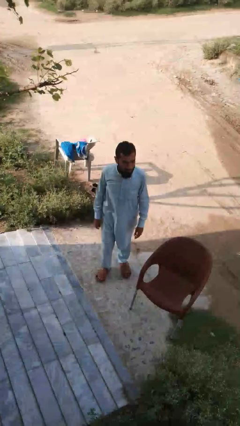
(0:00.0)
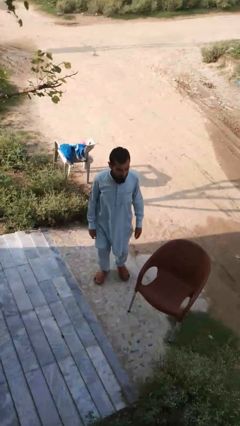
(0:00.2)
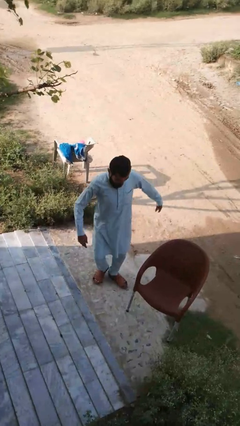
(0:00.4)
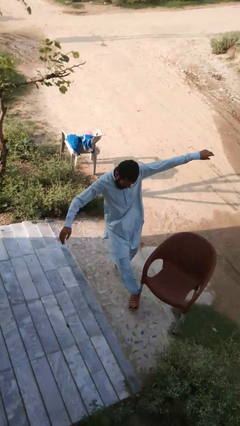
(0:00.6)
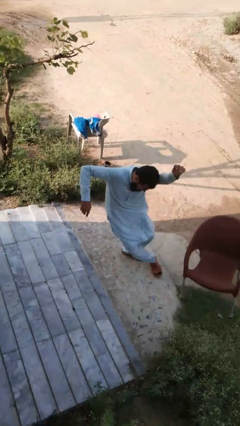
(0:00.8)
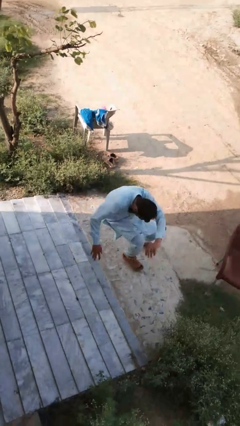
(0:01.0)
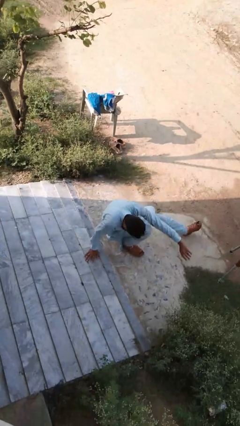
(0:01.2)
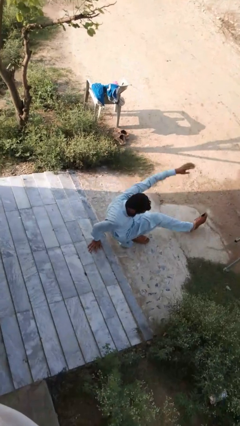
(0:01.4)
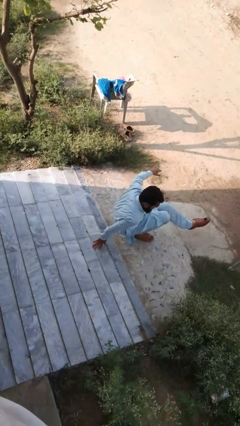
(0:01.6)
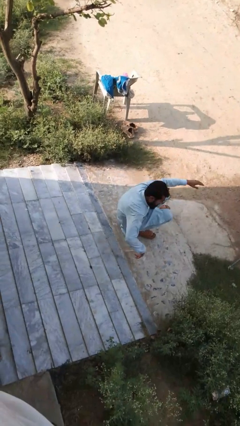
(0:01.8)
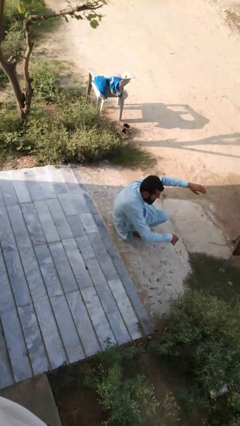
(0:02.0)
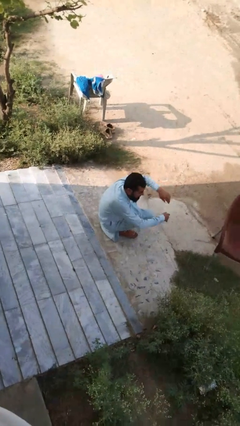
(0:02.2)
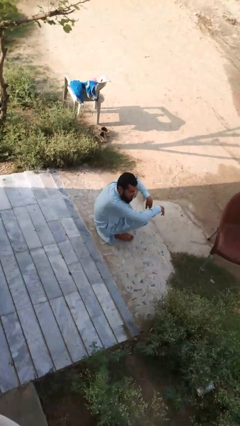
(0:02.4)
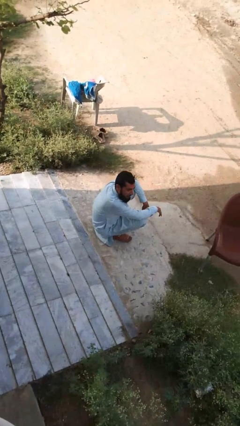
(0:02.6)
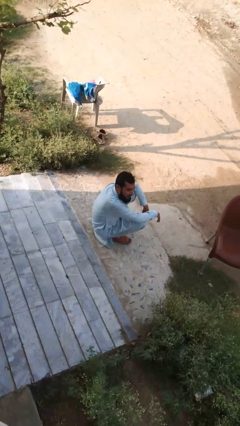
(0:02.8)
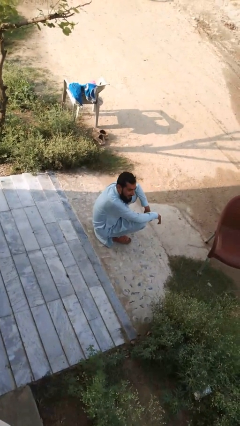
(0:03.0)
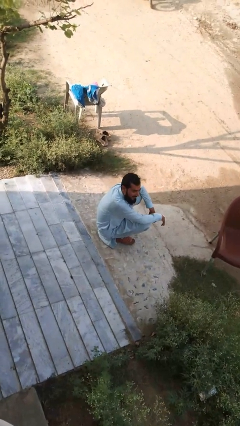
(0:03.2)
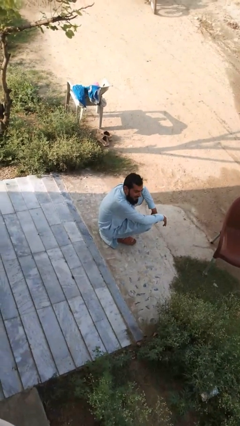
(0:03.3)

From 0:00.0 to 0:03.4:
person trips on object on floor

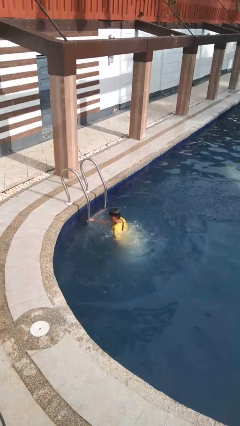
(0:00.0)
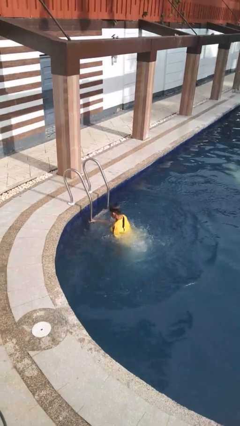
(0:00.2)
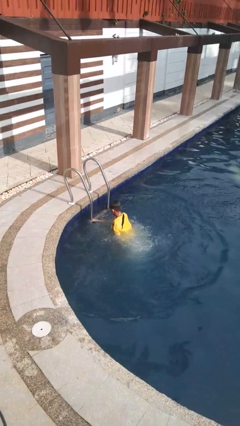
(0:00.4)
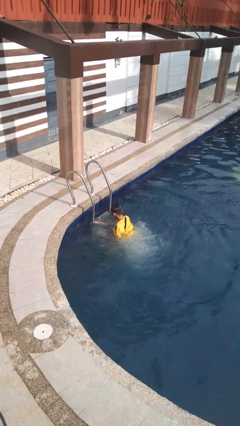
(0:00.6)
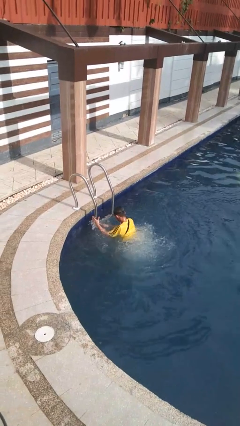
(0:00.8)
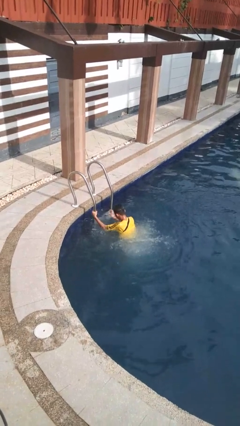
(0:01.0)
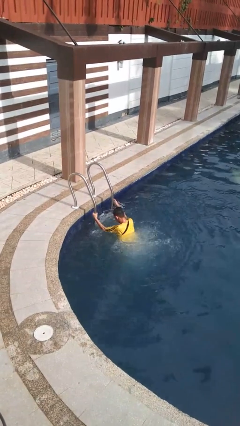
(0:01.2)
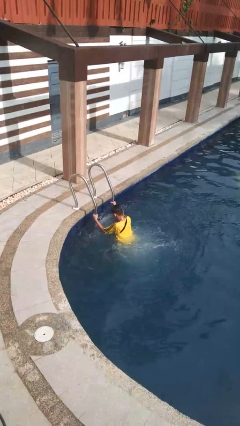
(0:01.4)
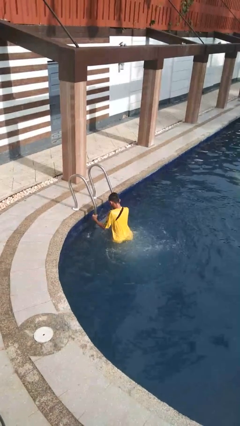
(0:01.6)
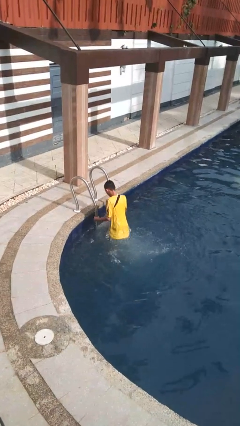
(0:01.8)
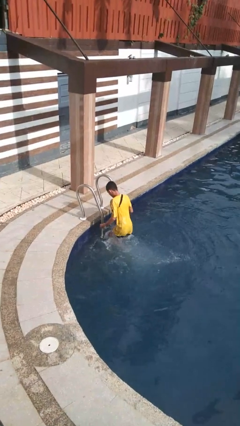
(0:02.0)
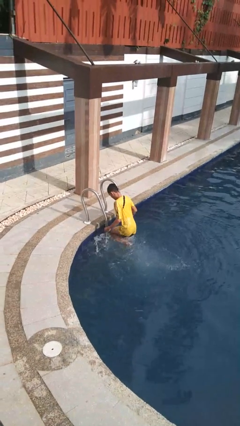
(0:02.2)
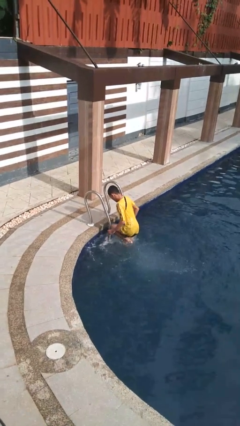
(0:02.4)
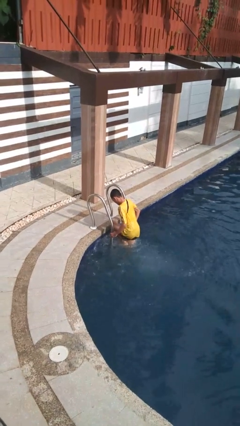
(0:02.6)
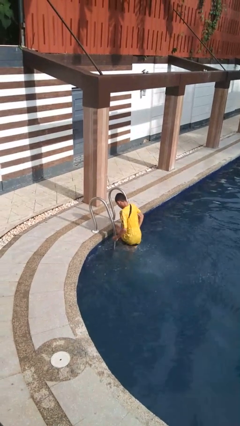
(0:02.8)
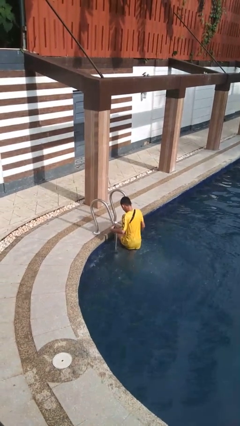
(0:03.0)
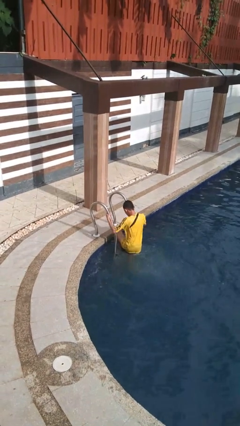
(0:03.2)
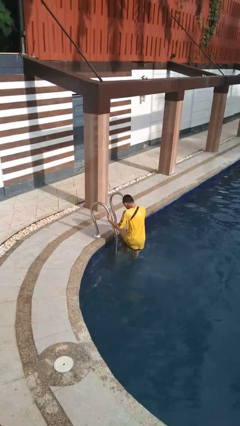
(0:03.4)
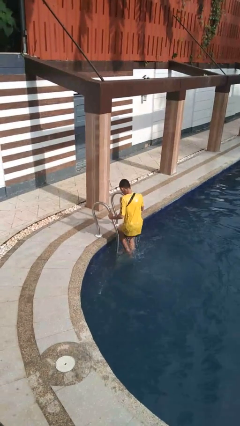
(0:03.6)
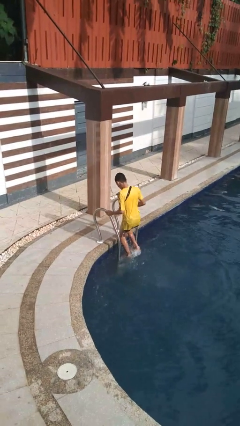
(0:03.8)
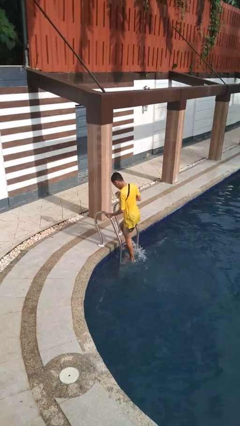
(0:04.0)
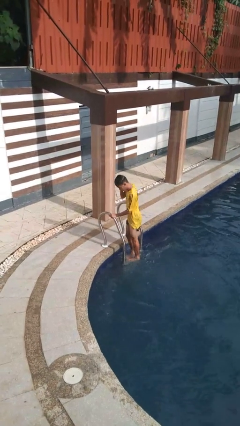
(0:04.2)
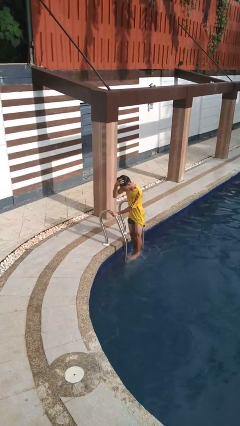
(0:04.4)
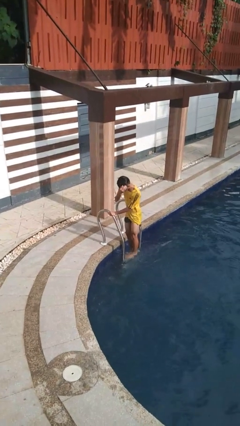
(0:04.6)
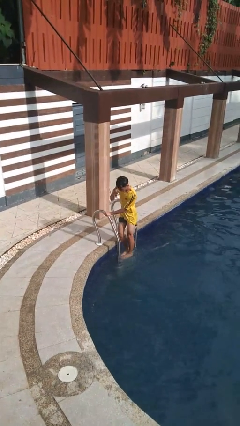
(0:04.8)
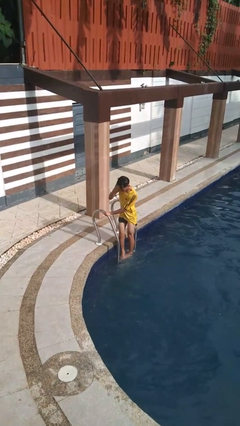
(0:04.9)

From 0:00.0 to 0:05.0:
person exits pool

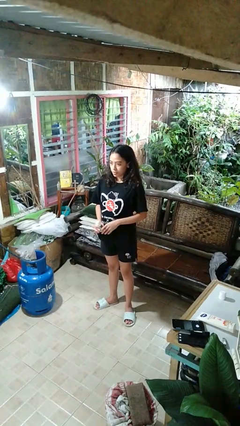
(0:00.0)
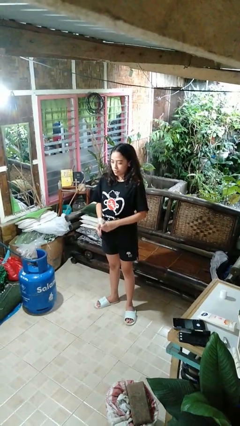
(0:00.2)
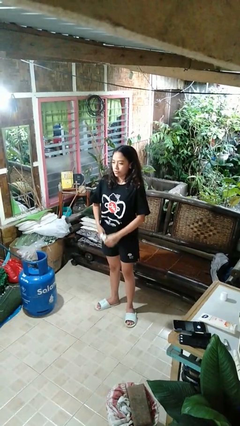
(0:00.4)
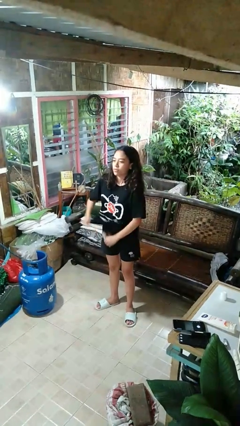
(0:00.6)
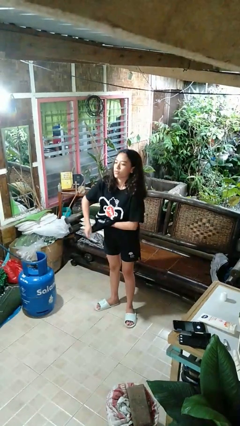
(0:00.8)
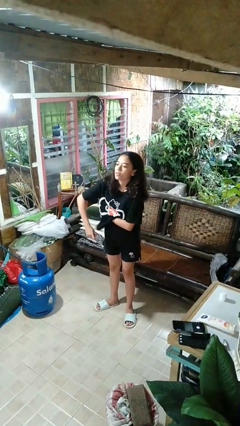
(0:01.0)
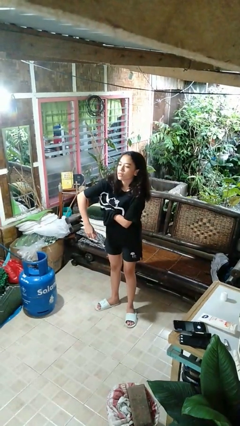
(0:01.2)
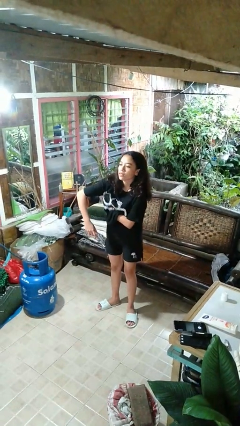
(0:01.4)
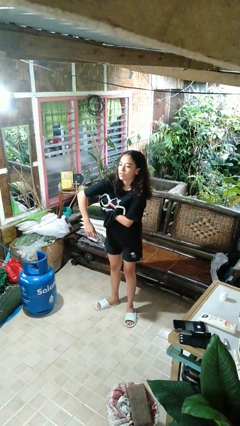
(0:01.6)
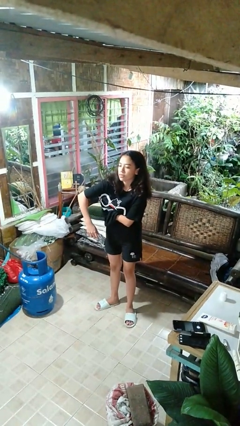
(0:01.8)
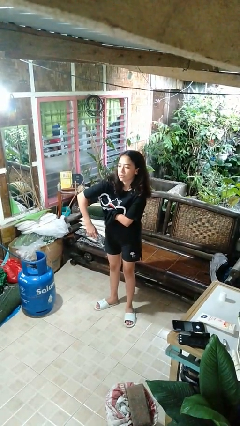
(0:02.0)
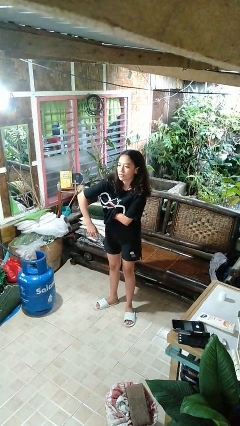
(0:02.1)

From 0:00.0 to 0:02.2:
person applies deodorant

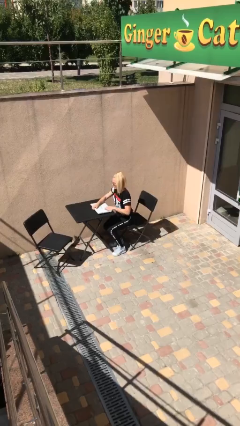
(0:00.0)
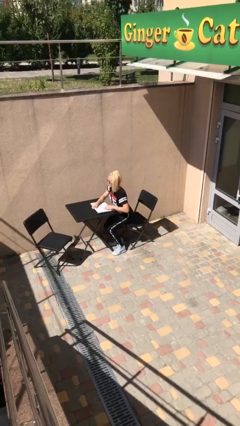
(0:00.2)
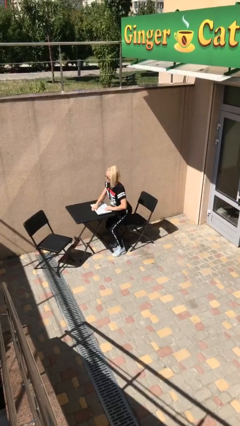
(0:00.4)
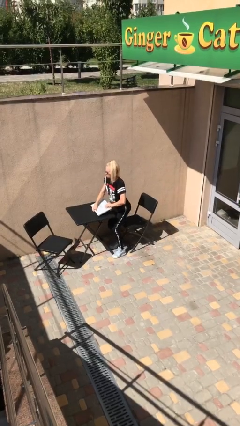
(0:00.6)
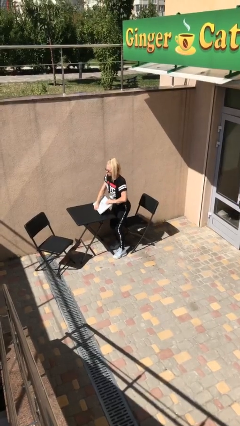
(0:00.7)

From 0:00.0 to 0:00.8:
person stands up

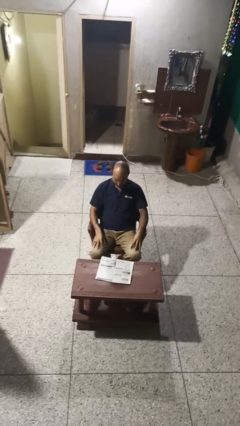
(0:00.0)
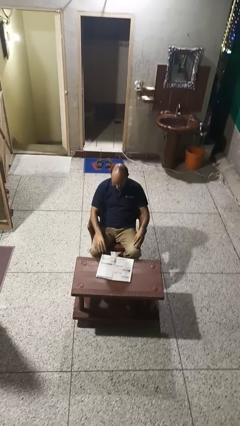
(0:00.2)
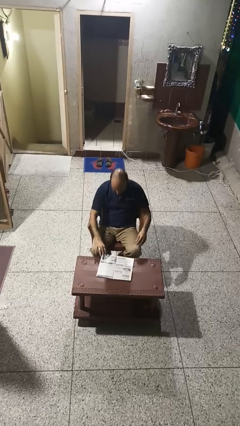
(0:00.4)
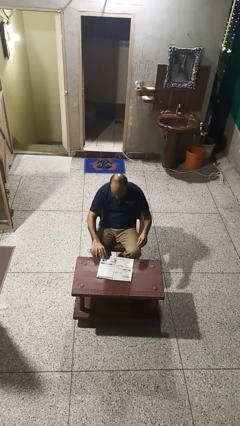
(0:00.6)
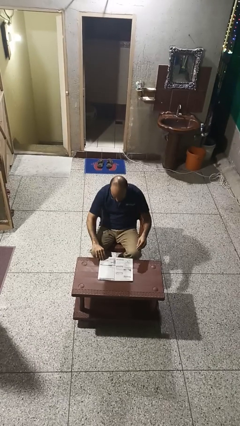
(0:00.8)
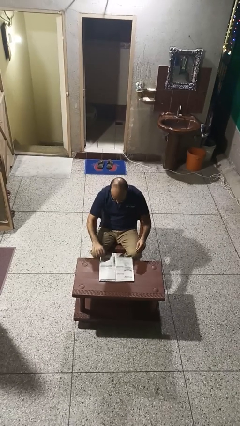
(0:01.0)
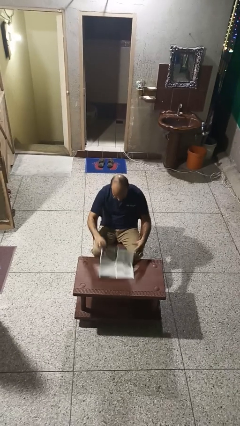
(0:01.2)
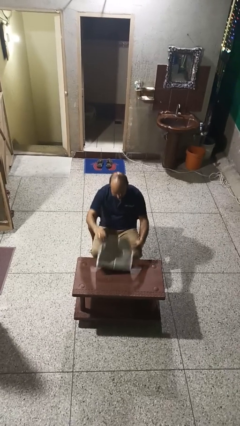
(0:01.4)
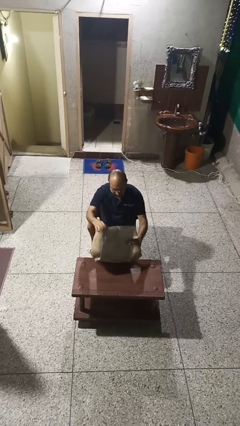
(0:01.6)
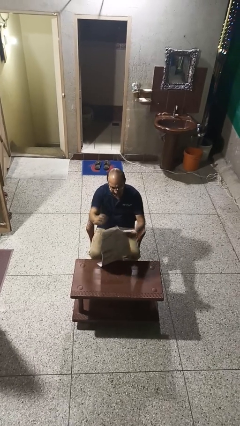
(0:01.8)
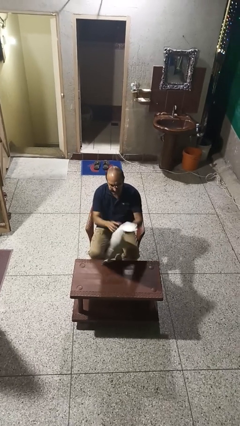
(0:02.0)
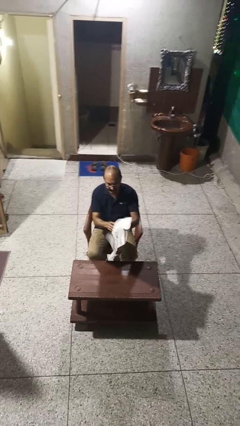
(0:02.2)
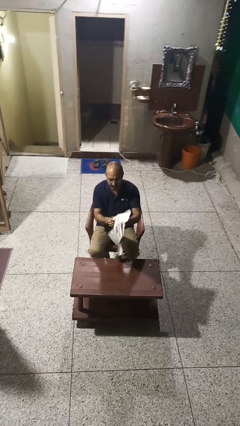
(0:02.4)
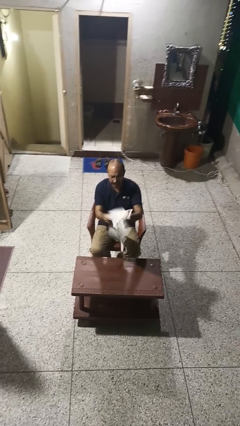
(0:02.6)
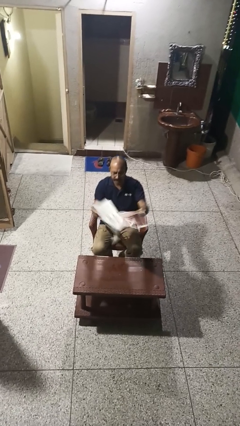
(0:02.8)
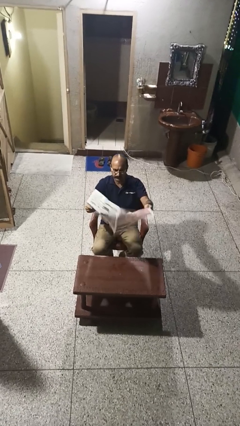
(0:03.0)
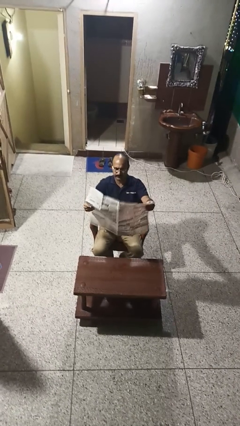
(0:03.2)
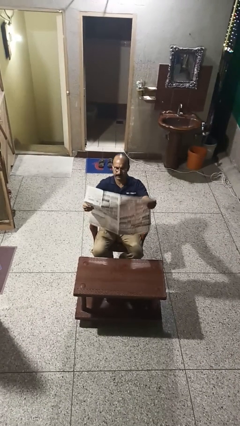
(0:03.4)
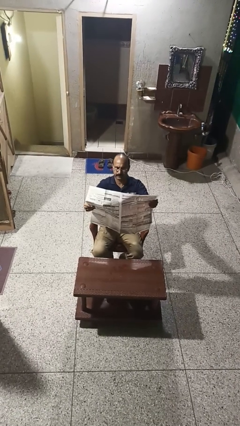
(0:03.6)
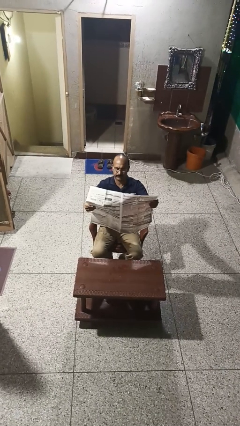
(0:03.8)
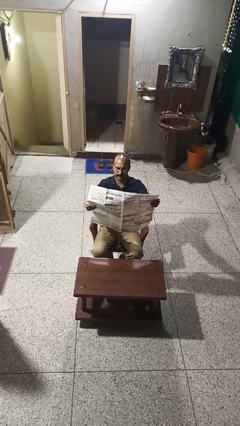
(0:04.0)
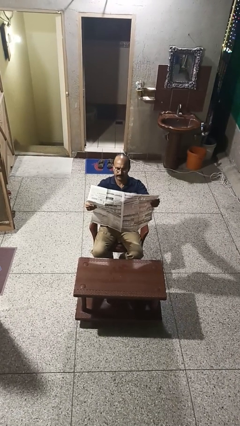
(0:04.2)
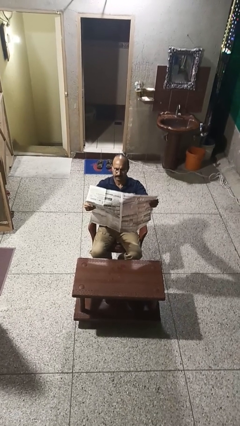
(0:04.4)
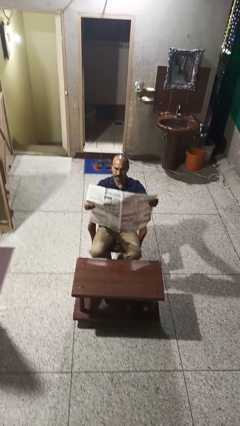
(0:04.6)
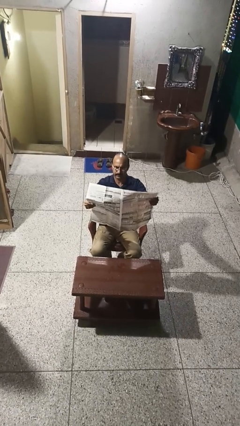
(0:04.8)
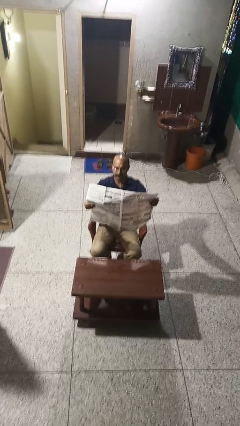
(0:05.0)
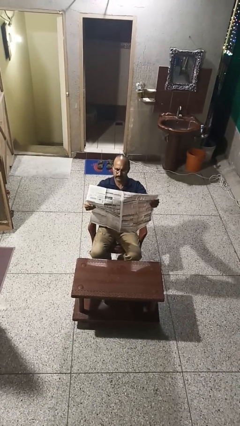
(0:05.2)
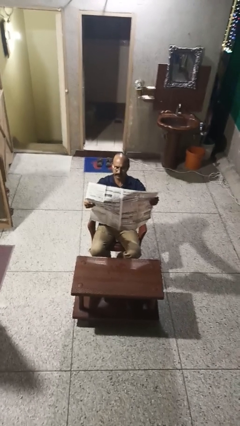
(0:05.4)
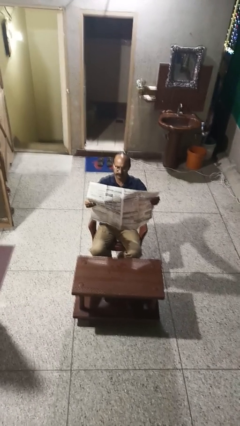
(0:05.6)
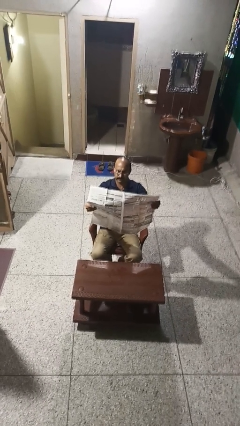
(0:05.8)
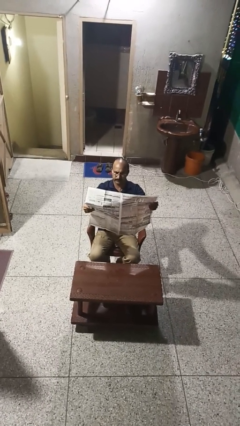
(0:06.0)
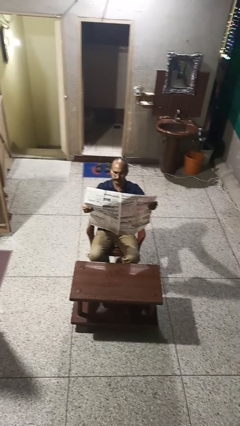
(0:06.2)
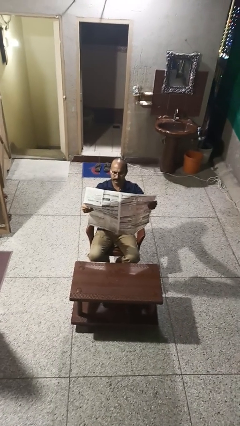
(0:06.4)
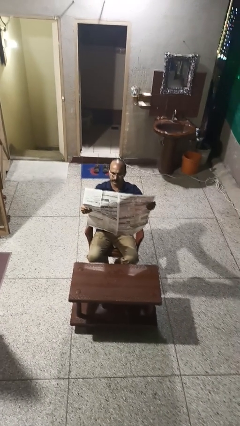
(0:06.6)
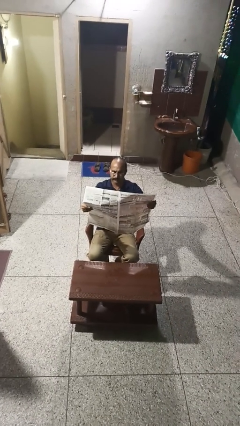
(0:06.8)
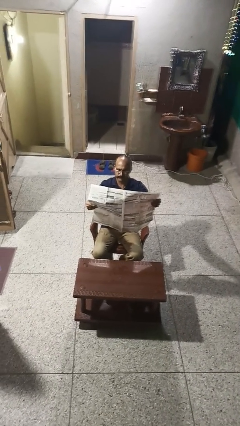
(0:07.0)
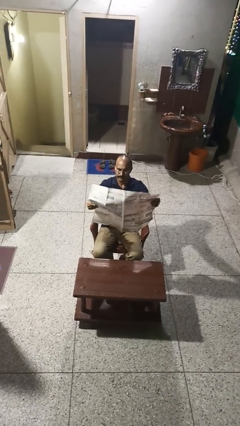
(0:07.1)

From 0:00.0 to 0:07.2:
person reads newspaper
